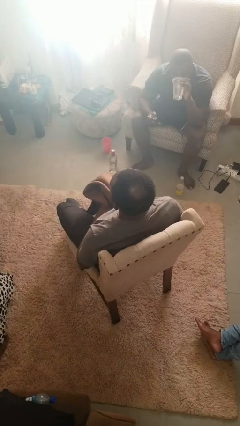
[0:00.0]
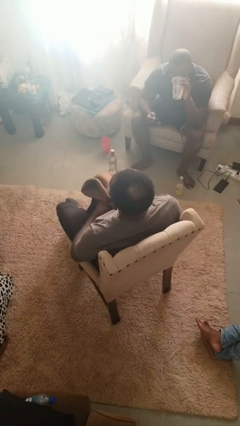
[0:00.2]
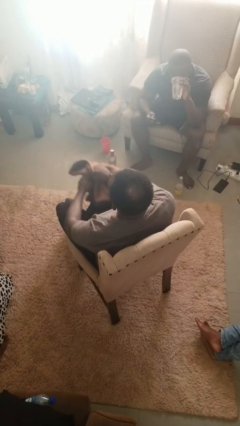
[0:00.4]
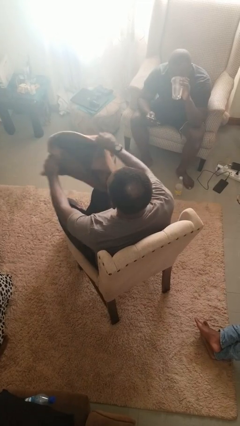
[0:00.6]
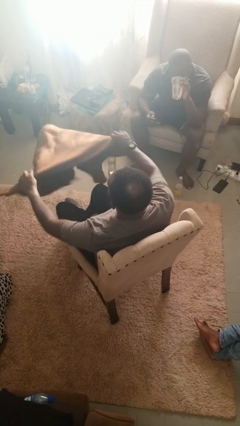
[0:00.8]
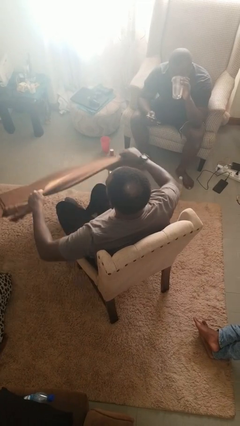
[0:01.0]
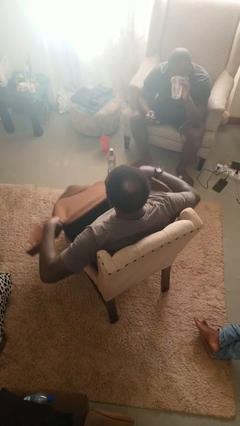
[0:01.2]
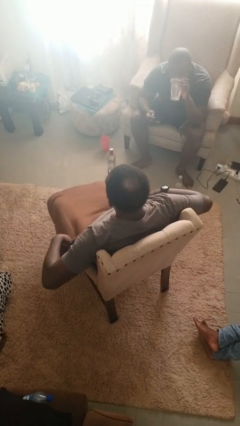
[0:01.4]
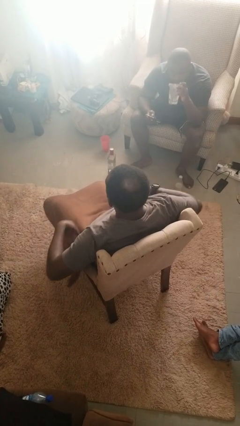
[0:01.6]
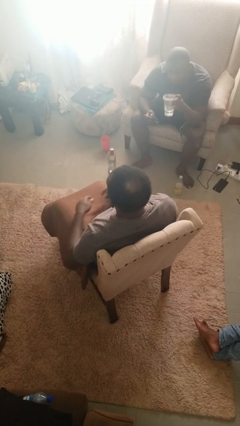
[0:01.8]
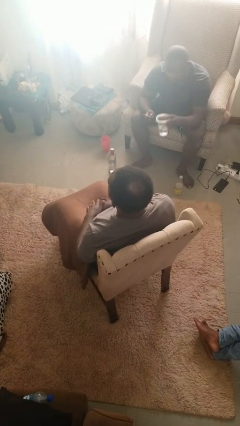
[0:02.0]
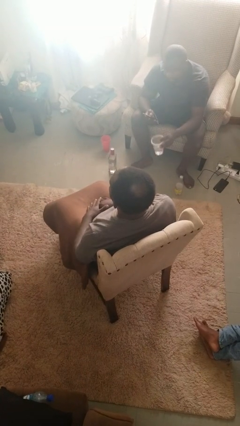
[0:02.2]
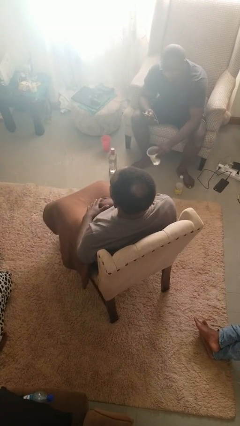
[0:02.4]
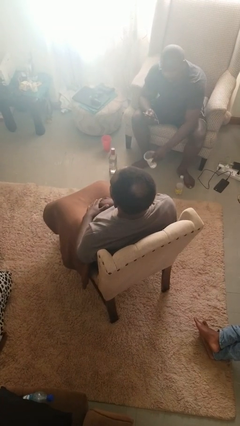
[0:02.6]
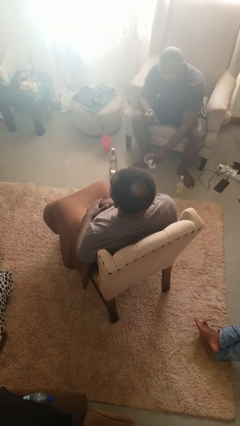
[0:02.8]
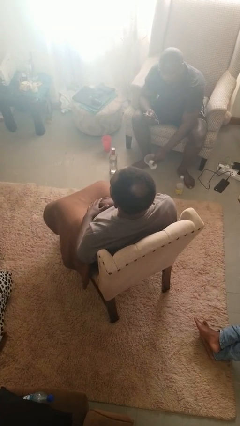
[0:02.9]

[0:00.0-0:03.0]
person covers with blanket

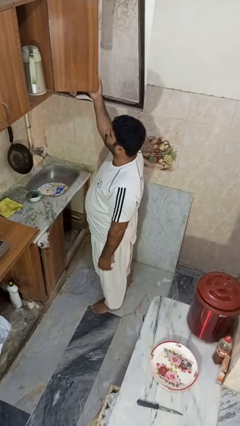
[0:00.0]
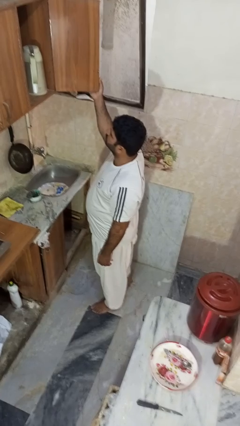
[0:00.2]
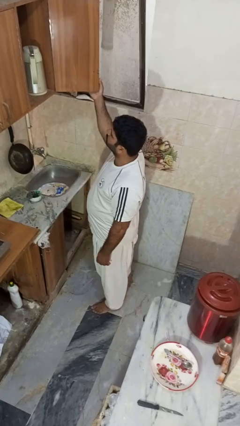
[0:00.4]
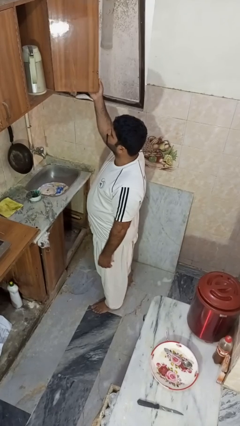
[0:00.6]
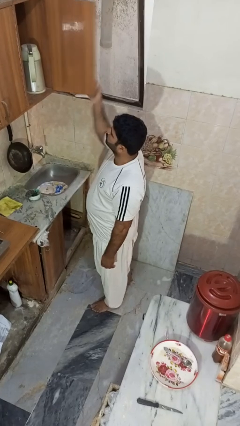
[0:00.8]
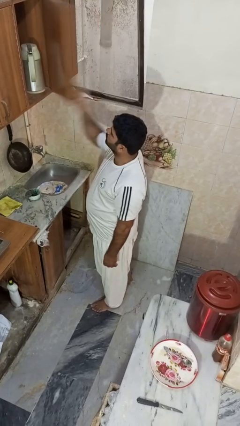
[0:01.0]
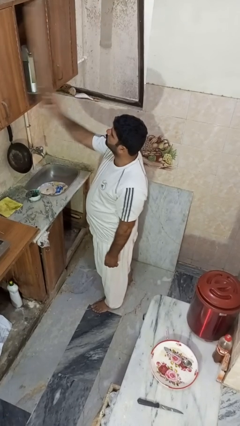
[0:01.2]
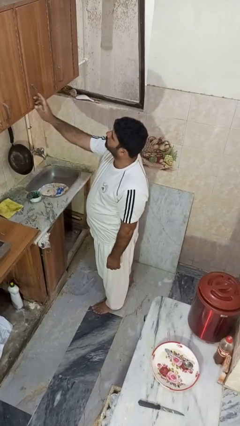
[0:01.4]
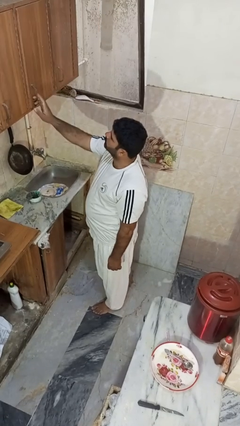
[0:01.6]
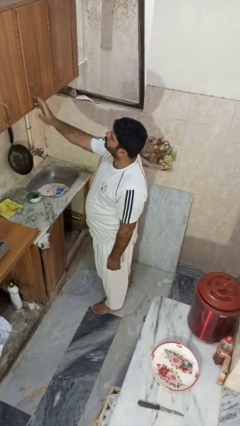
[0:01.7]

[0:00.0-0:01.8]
person closes cabinet

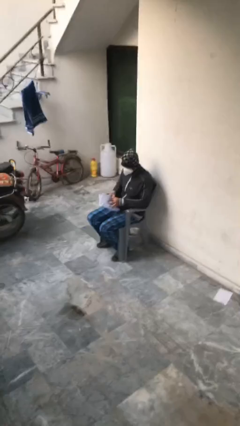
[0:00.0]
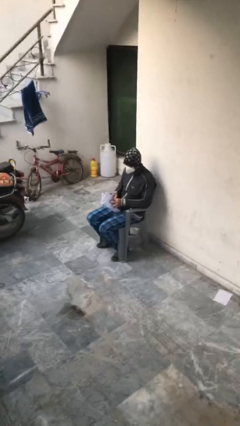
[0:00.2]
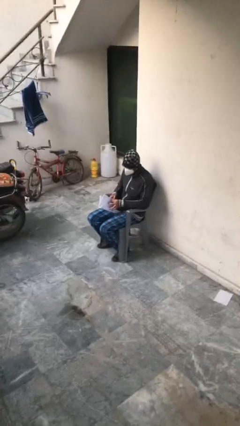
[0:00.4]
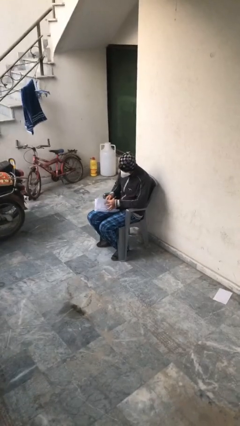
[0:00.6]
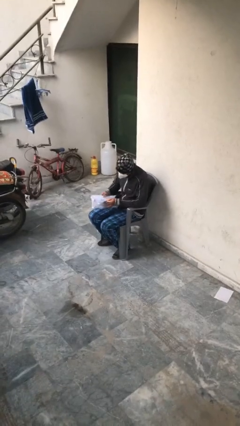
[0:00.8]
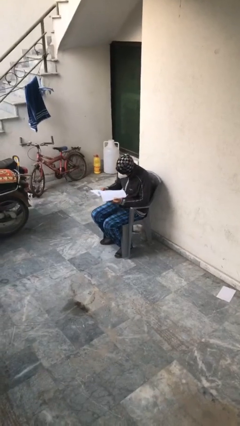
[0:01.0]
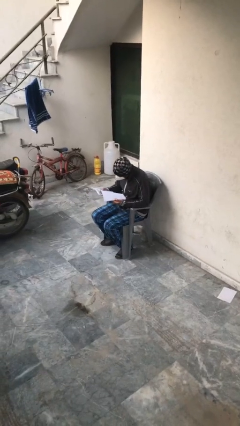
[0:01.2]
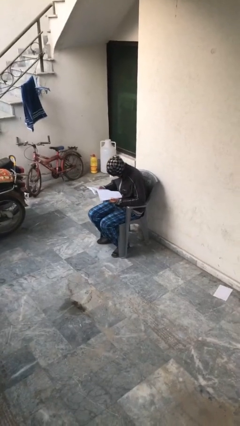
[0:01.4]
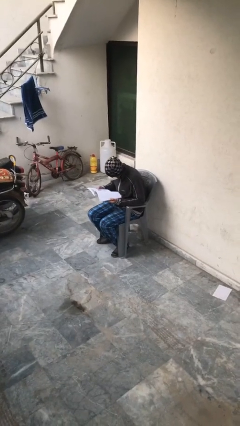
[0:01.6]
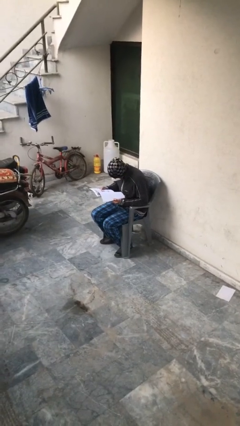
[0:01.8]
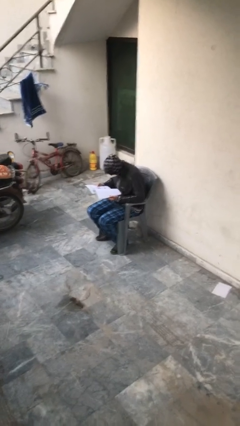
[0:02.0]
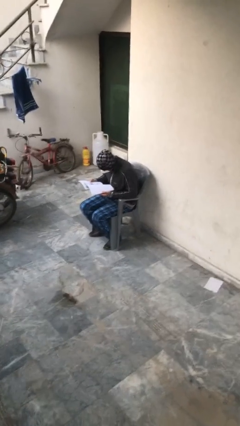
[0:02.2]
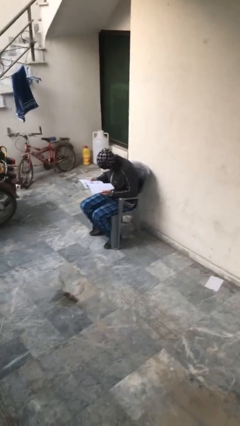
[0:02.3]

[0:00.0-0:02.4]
person reads document

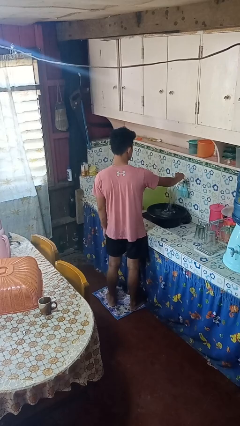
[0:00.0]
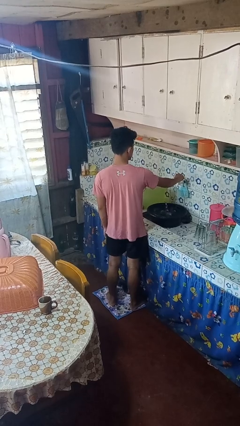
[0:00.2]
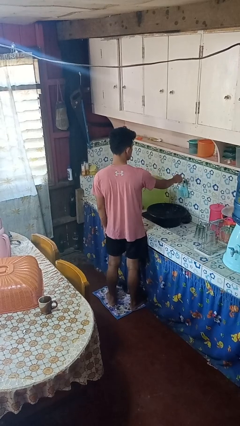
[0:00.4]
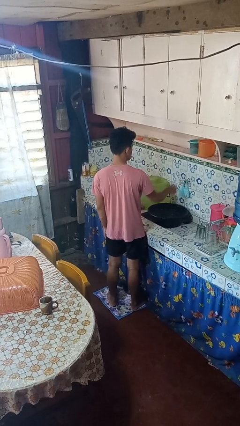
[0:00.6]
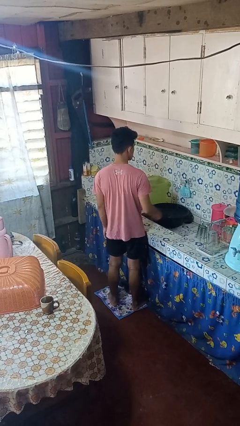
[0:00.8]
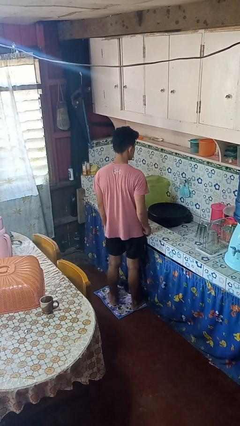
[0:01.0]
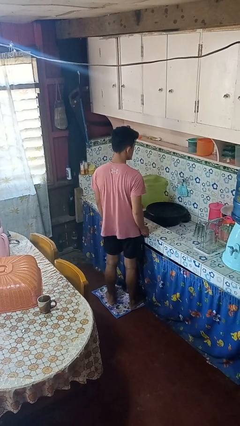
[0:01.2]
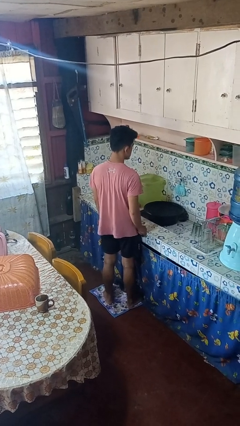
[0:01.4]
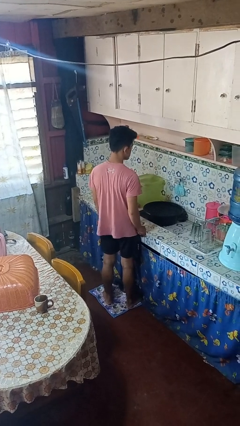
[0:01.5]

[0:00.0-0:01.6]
person turns off faucet

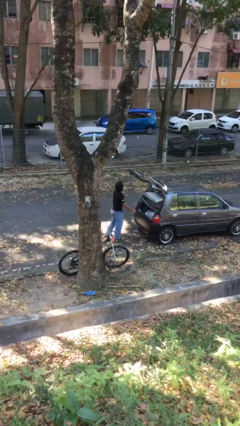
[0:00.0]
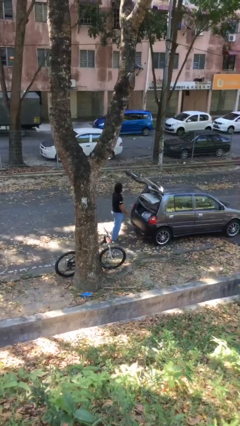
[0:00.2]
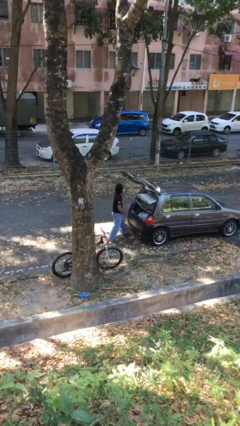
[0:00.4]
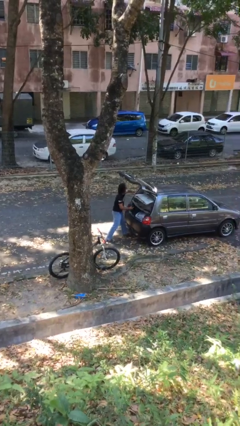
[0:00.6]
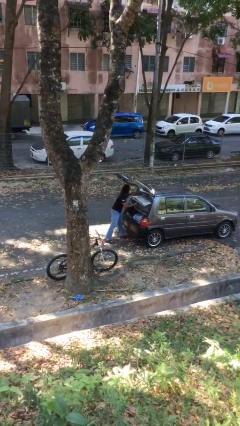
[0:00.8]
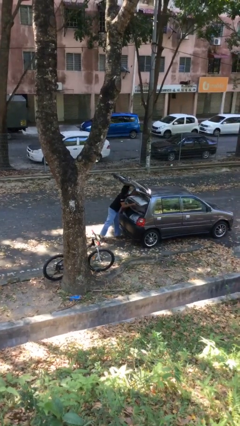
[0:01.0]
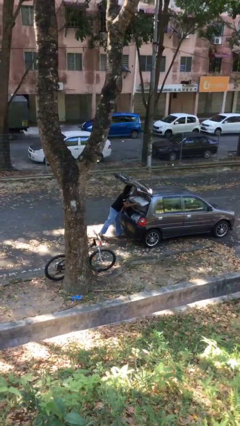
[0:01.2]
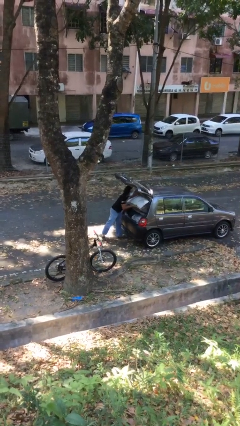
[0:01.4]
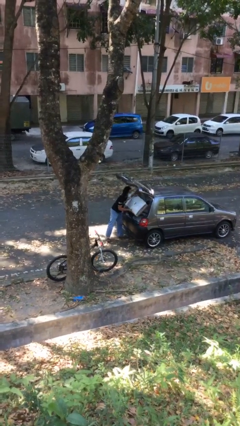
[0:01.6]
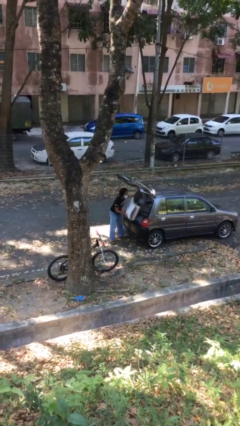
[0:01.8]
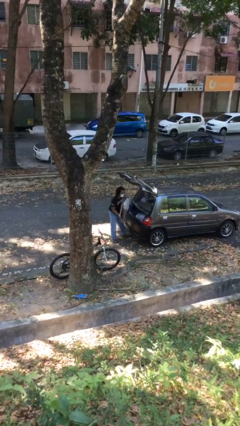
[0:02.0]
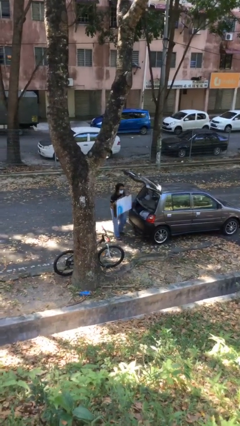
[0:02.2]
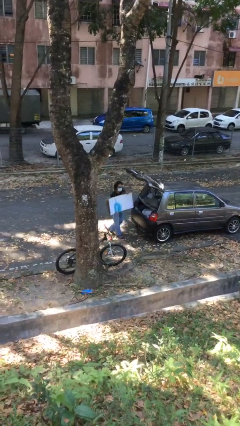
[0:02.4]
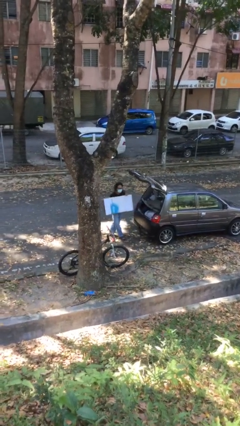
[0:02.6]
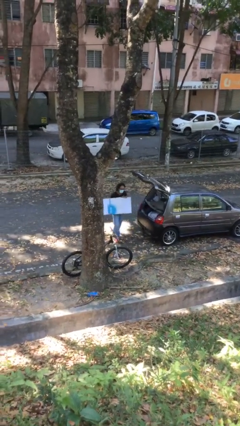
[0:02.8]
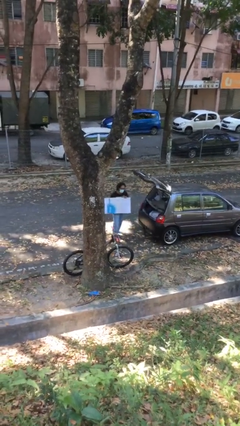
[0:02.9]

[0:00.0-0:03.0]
person unloads car

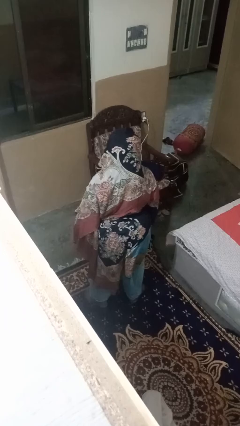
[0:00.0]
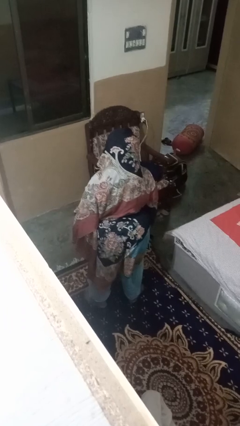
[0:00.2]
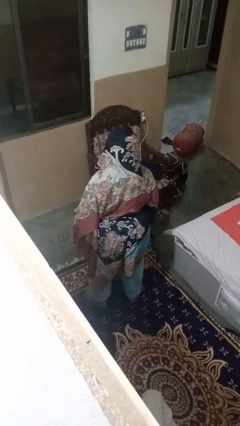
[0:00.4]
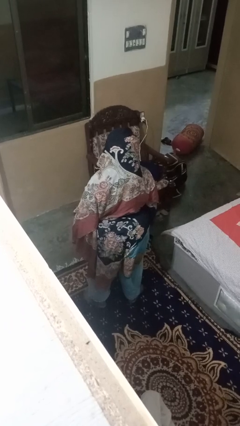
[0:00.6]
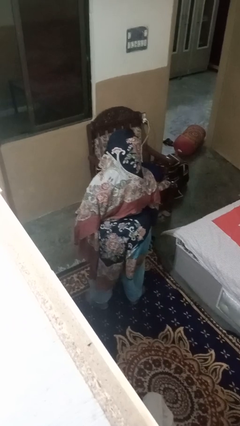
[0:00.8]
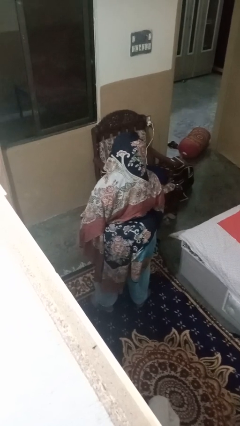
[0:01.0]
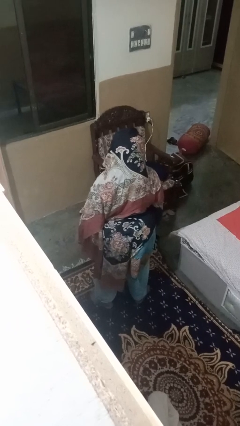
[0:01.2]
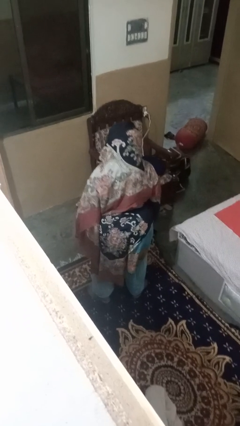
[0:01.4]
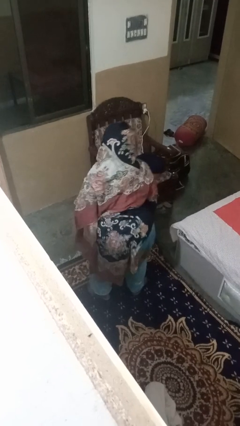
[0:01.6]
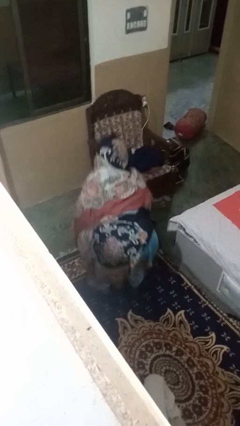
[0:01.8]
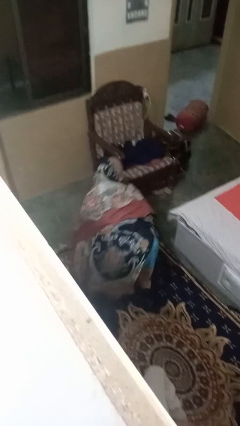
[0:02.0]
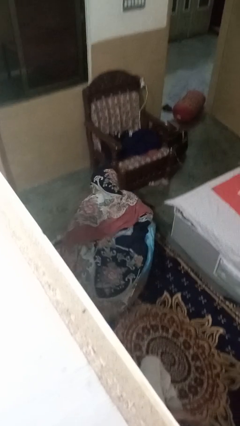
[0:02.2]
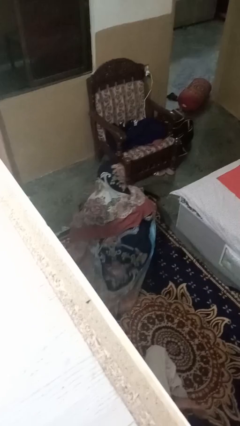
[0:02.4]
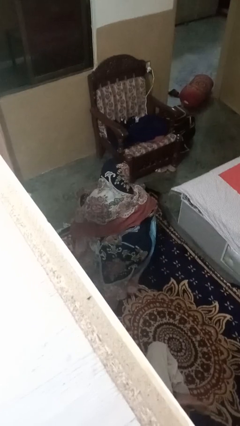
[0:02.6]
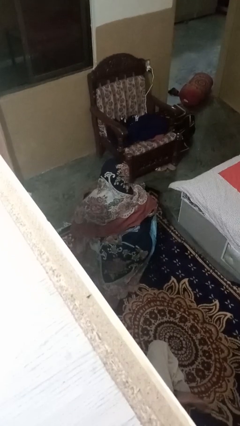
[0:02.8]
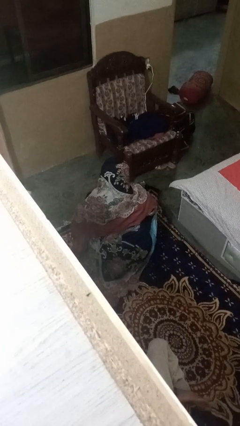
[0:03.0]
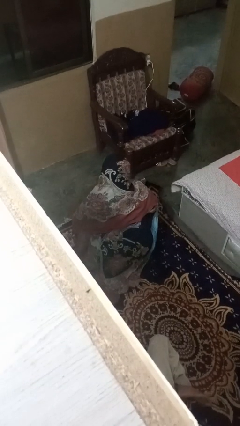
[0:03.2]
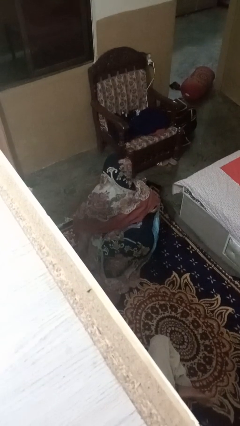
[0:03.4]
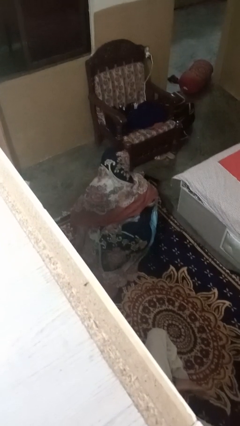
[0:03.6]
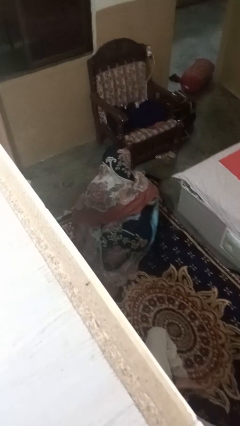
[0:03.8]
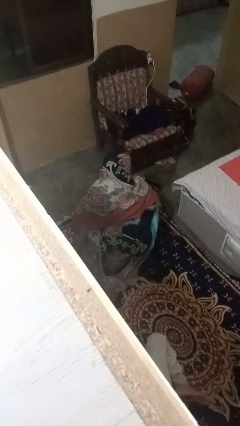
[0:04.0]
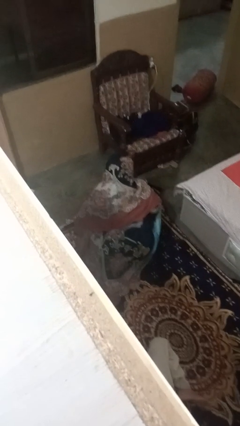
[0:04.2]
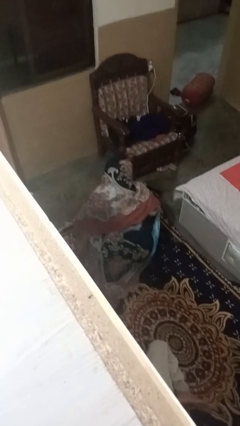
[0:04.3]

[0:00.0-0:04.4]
person squats

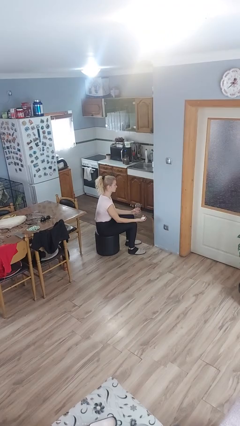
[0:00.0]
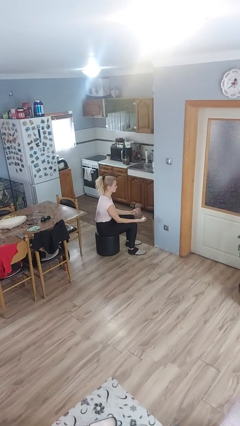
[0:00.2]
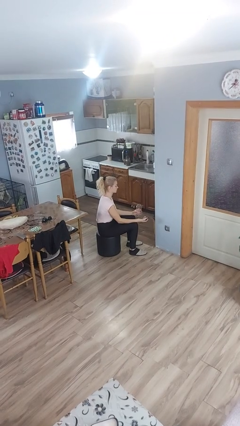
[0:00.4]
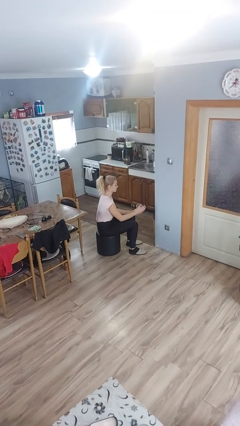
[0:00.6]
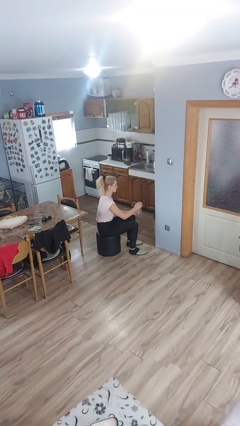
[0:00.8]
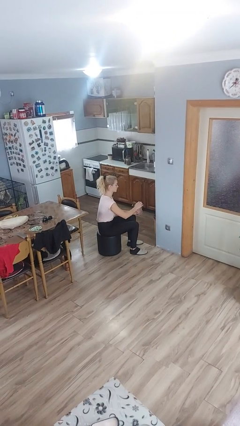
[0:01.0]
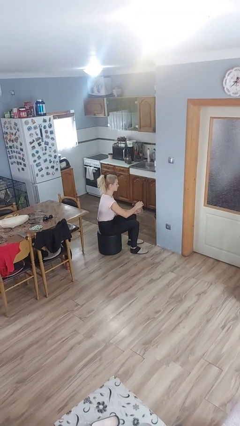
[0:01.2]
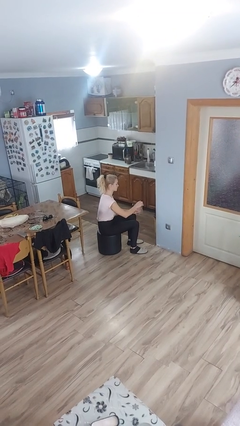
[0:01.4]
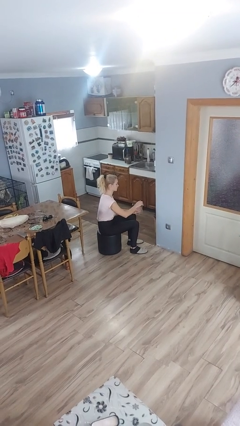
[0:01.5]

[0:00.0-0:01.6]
person closes jar
